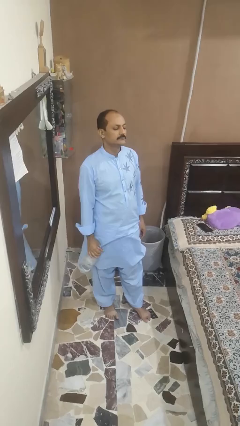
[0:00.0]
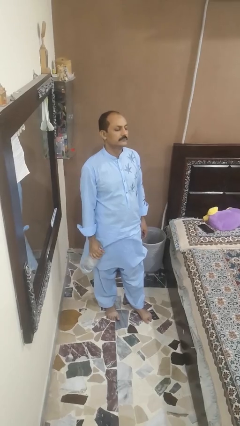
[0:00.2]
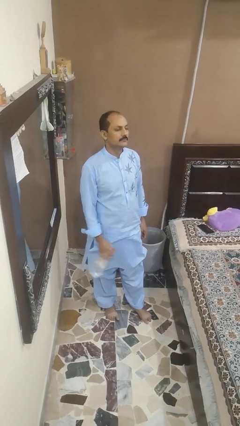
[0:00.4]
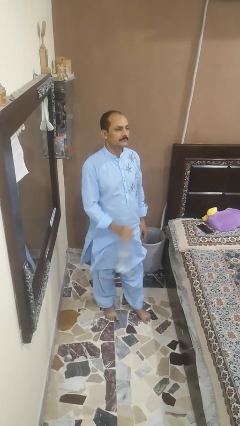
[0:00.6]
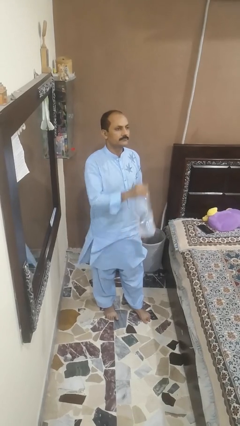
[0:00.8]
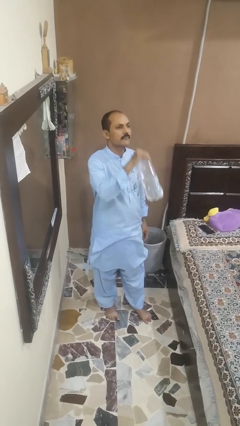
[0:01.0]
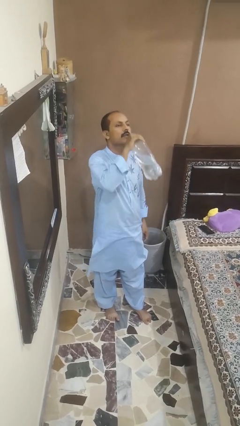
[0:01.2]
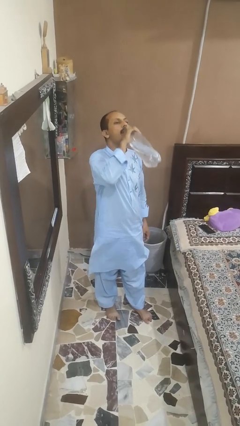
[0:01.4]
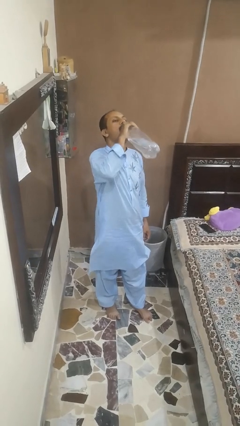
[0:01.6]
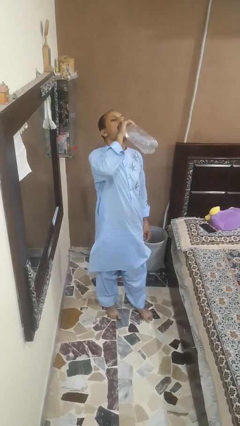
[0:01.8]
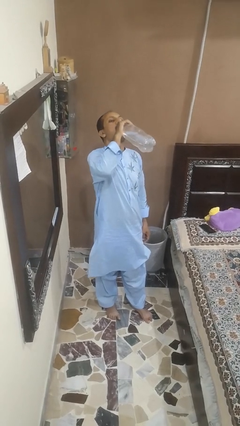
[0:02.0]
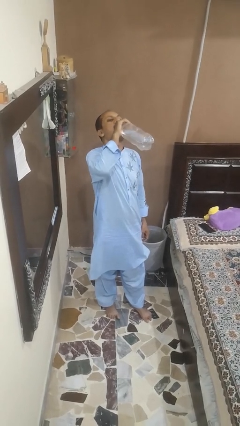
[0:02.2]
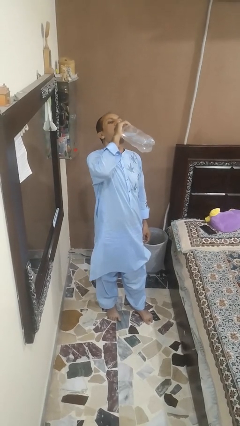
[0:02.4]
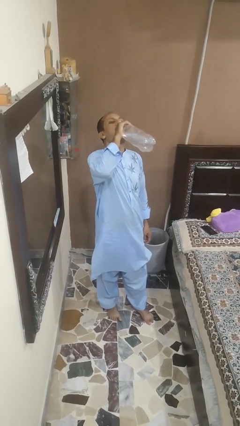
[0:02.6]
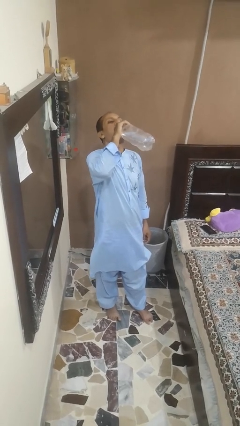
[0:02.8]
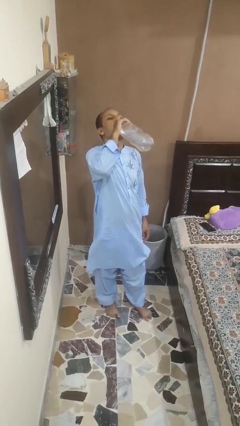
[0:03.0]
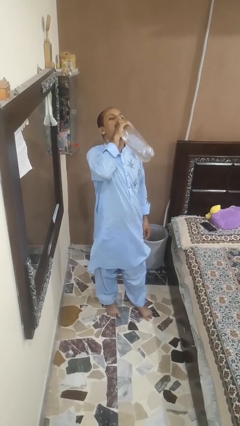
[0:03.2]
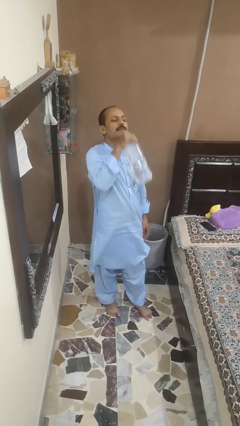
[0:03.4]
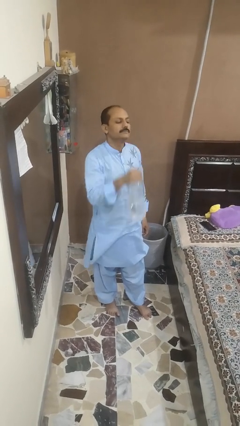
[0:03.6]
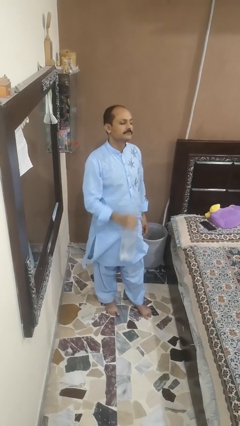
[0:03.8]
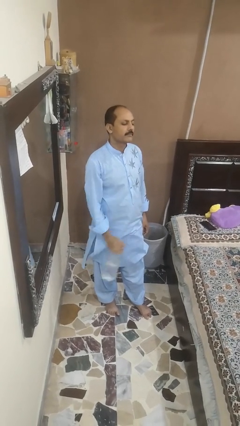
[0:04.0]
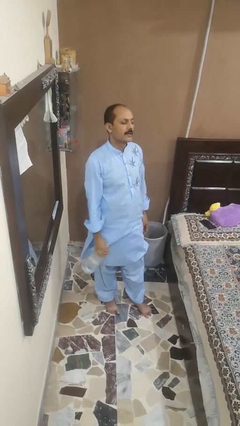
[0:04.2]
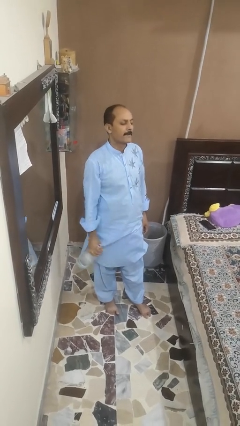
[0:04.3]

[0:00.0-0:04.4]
person drinks from bottle

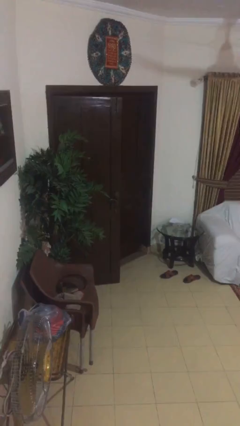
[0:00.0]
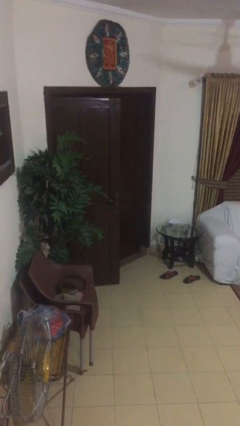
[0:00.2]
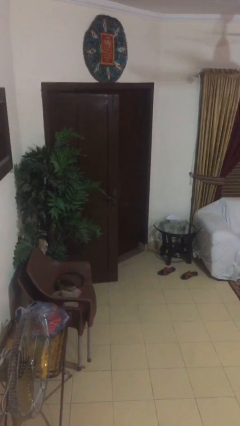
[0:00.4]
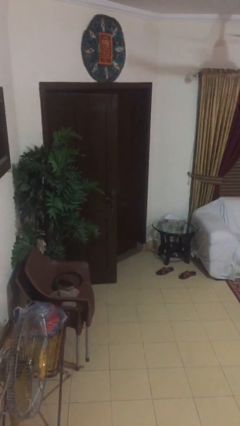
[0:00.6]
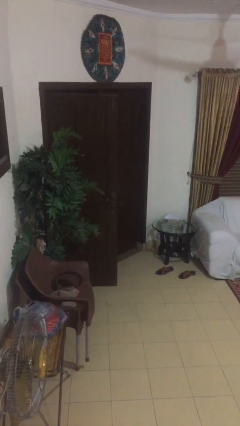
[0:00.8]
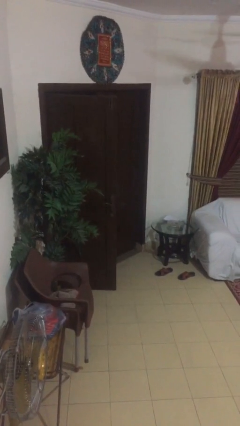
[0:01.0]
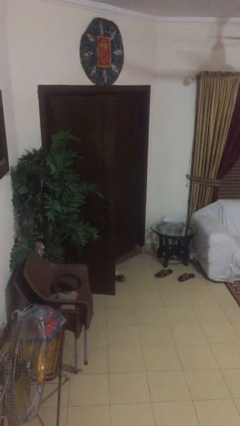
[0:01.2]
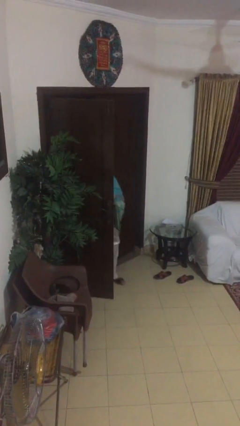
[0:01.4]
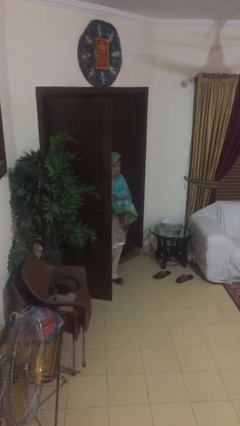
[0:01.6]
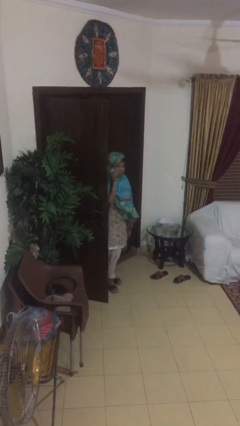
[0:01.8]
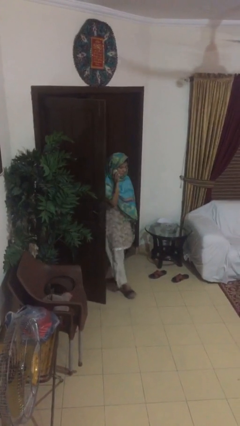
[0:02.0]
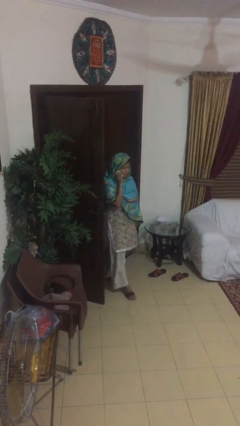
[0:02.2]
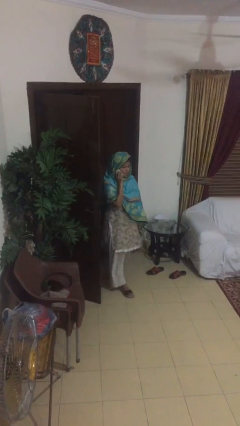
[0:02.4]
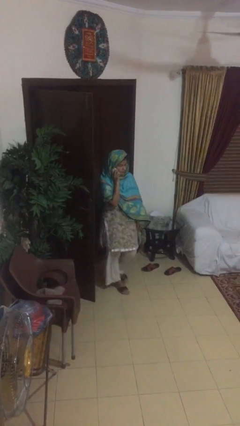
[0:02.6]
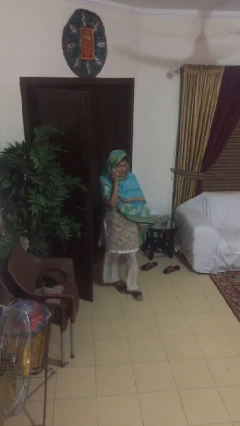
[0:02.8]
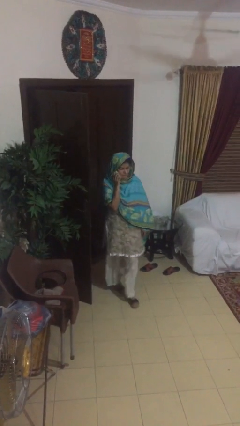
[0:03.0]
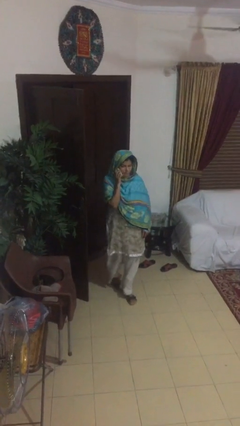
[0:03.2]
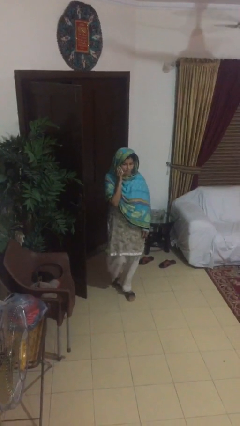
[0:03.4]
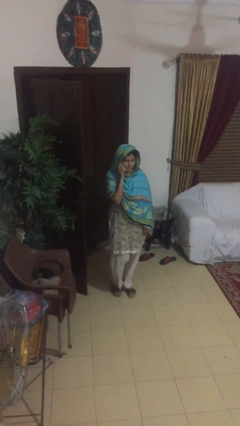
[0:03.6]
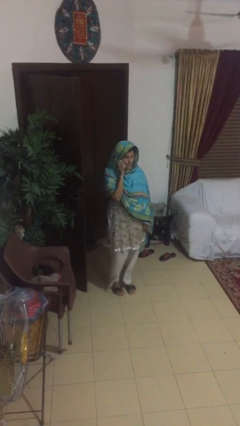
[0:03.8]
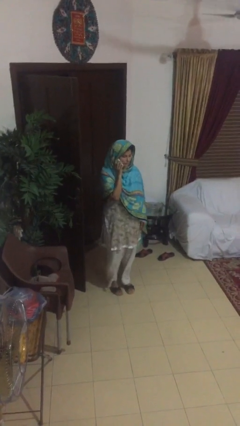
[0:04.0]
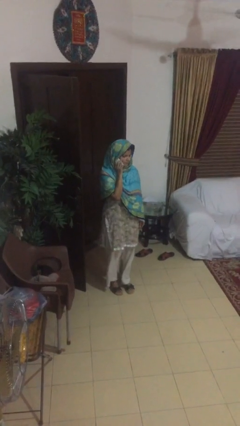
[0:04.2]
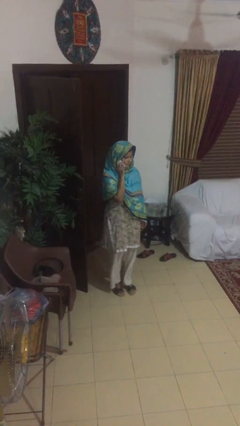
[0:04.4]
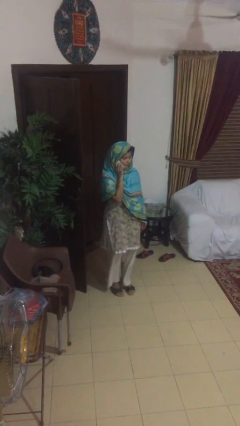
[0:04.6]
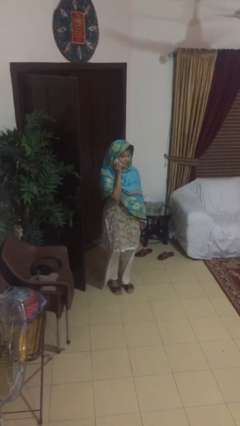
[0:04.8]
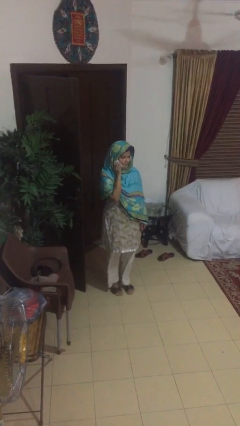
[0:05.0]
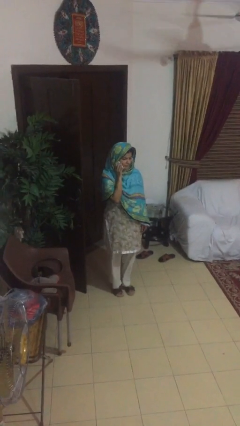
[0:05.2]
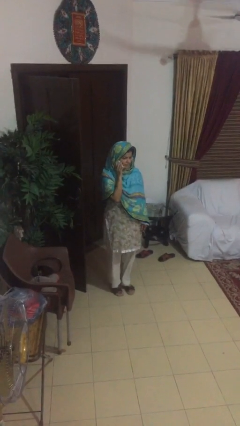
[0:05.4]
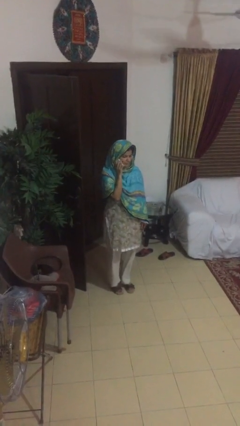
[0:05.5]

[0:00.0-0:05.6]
person enters scene through structure

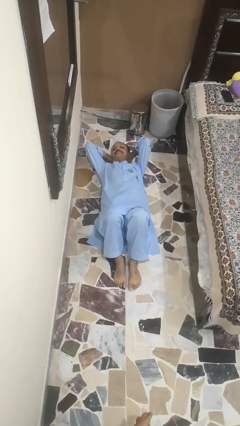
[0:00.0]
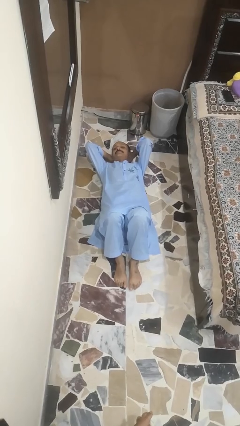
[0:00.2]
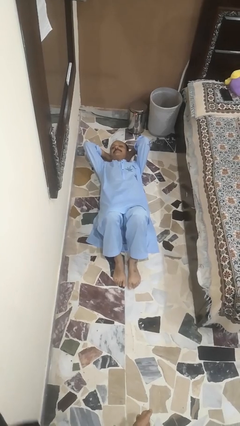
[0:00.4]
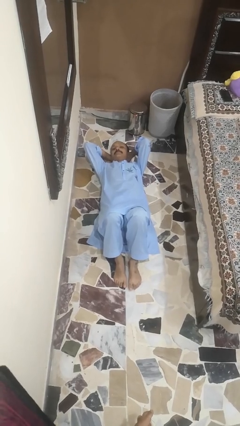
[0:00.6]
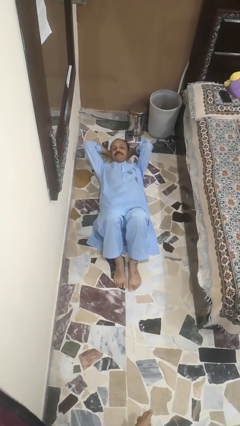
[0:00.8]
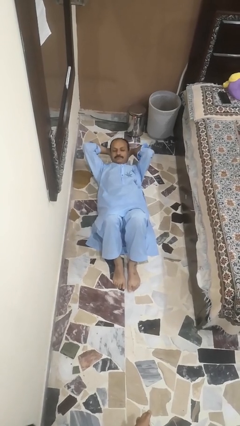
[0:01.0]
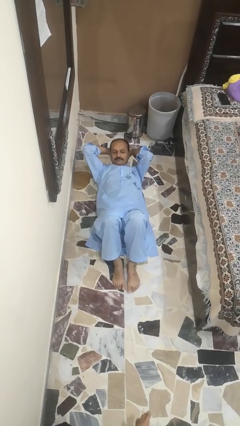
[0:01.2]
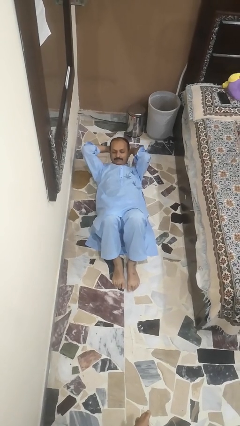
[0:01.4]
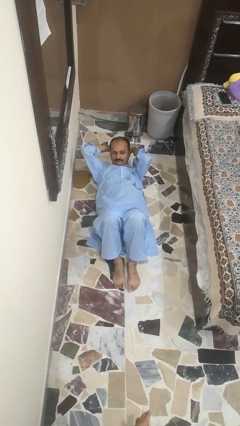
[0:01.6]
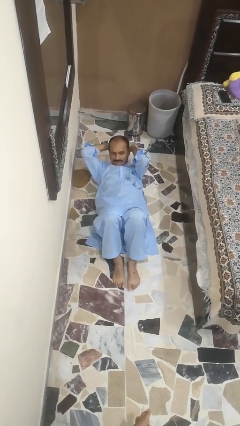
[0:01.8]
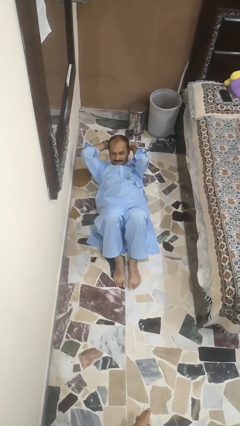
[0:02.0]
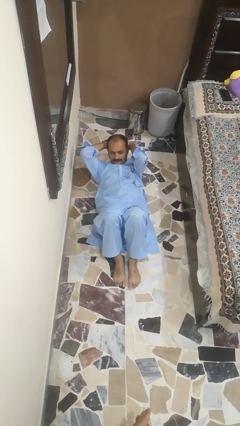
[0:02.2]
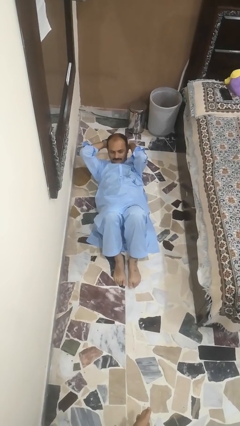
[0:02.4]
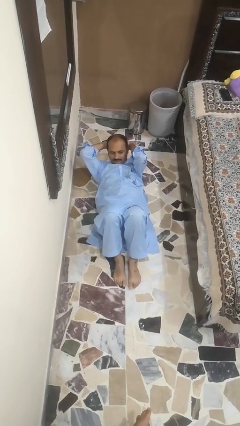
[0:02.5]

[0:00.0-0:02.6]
person exercises with situp

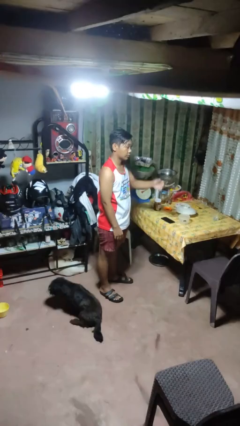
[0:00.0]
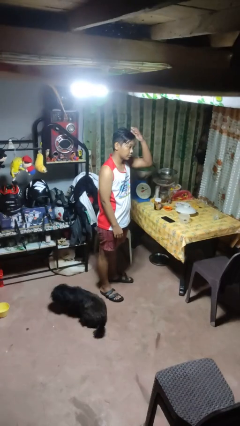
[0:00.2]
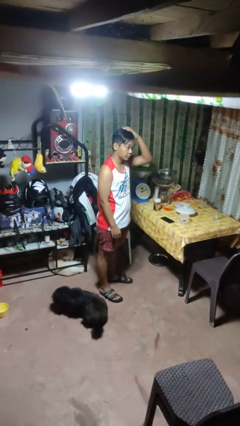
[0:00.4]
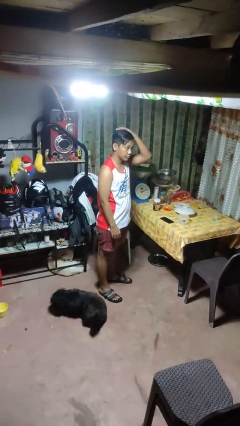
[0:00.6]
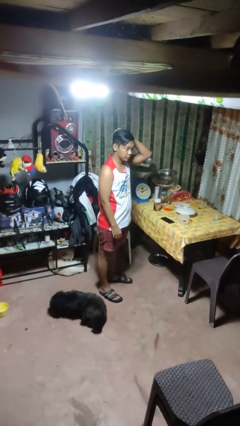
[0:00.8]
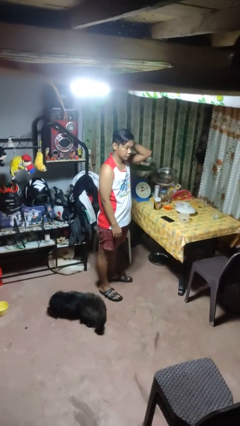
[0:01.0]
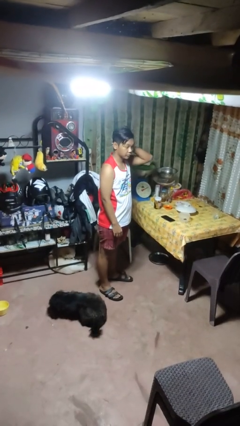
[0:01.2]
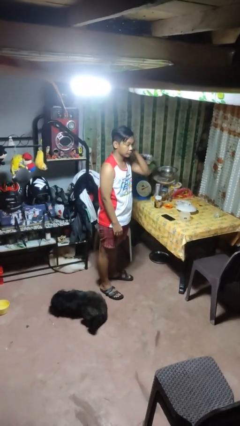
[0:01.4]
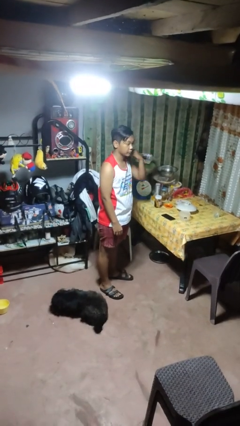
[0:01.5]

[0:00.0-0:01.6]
person pats head

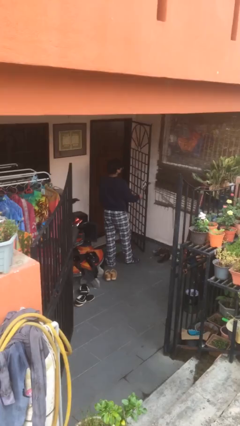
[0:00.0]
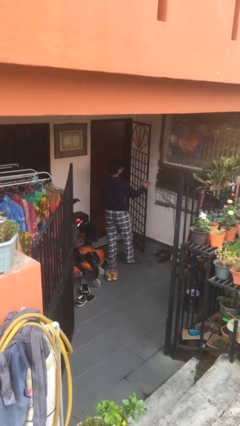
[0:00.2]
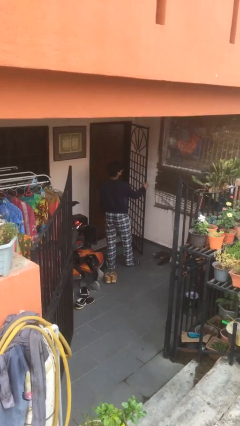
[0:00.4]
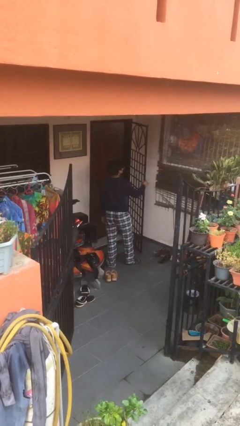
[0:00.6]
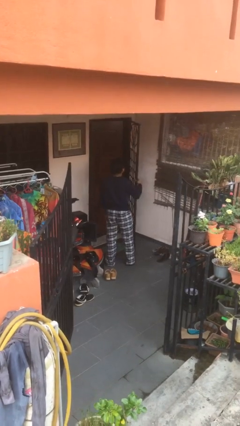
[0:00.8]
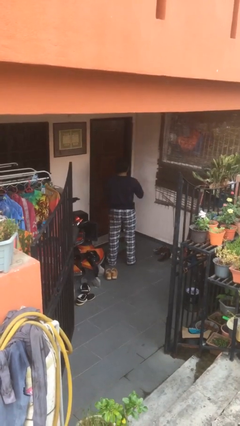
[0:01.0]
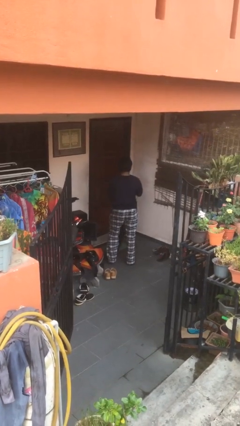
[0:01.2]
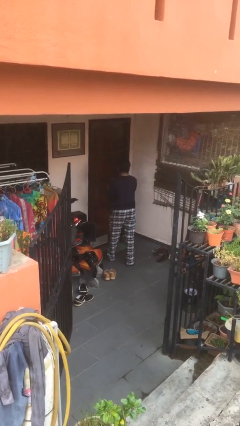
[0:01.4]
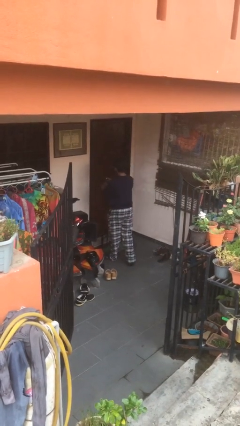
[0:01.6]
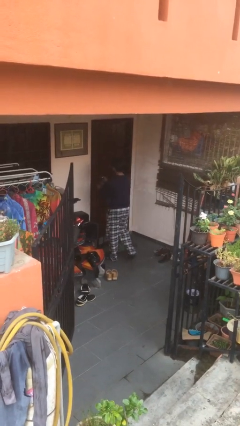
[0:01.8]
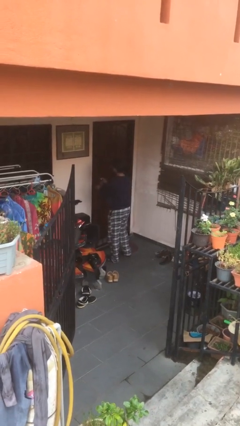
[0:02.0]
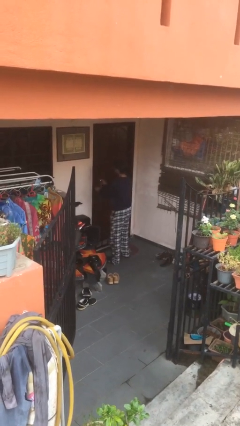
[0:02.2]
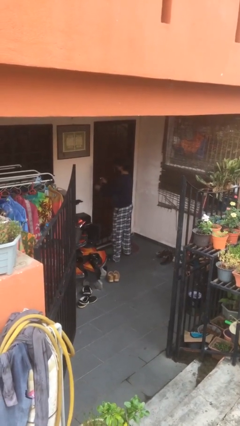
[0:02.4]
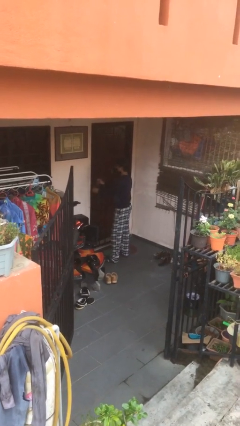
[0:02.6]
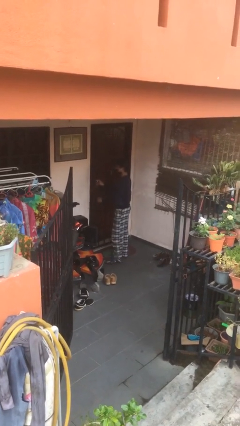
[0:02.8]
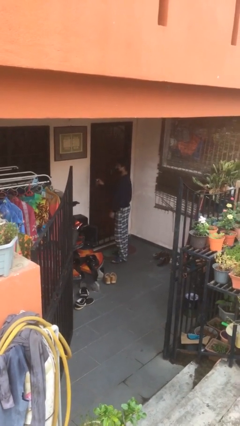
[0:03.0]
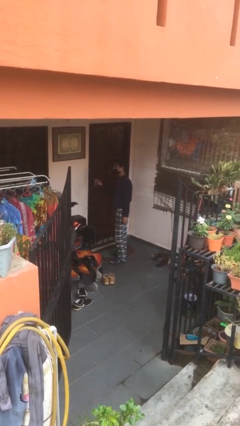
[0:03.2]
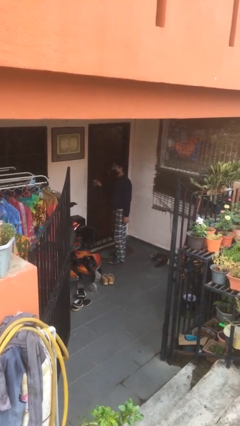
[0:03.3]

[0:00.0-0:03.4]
person closes facility door
